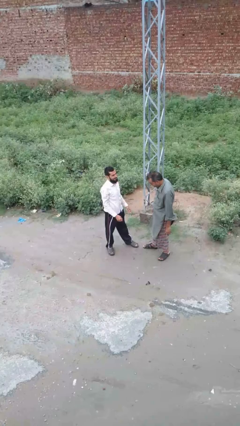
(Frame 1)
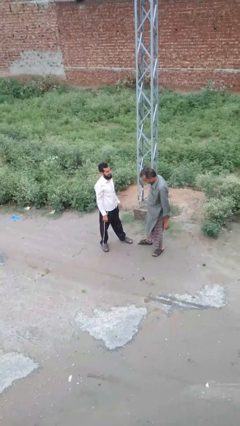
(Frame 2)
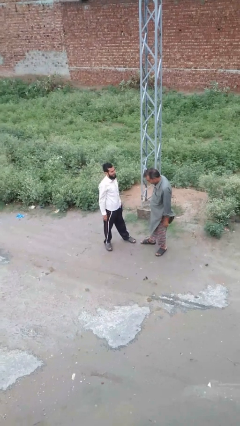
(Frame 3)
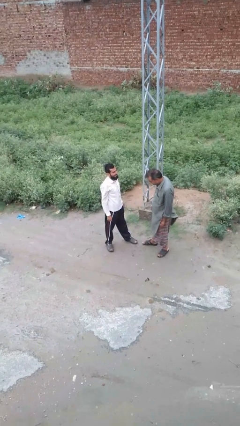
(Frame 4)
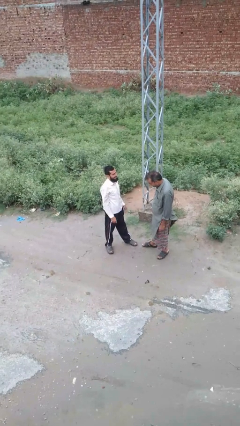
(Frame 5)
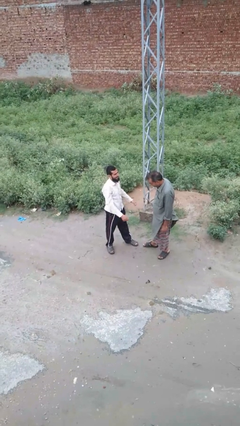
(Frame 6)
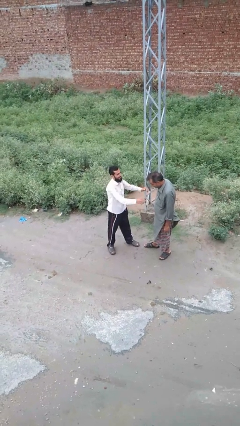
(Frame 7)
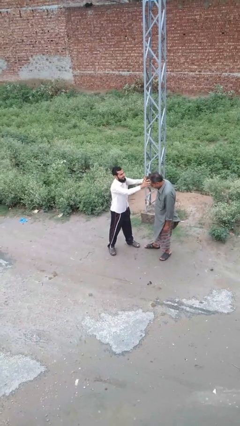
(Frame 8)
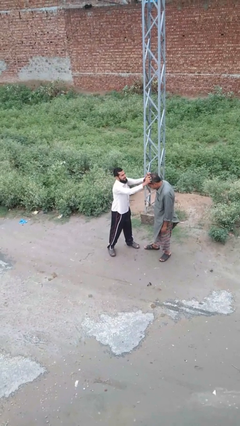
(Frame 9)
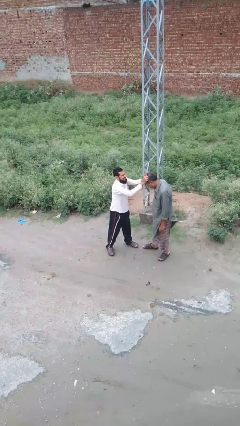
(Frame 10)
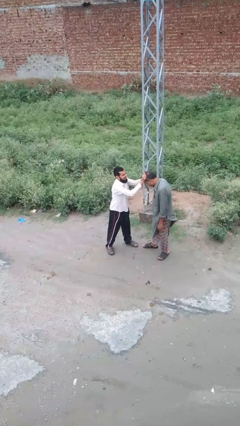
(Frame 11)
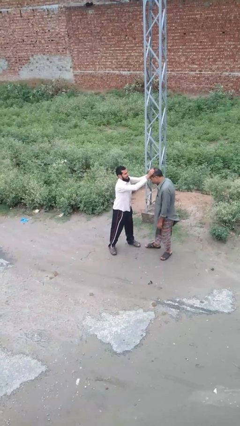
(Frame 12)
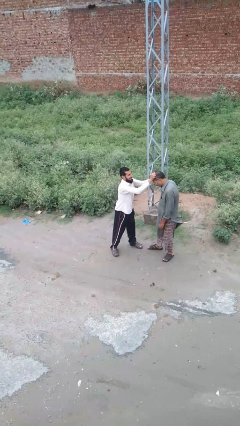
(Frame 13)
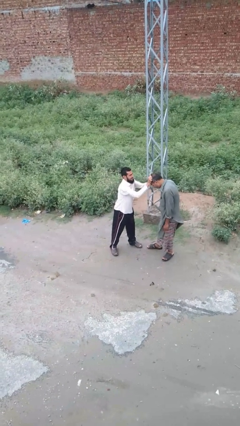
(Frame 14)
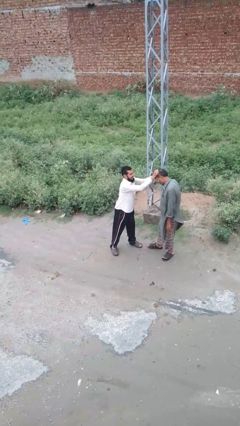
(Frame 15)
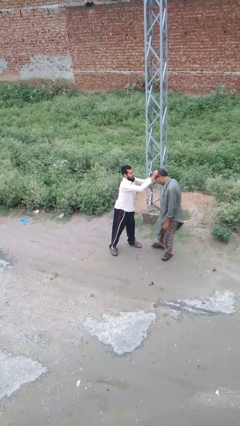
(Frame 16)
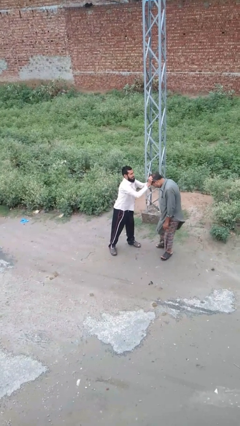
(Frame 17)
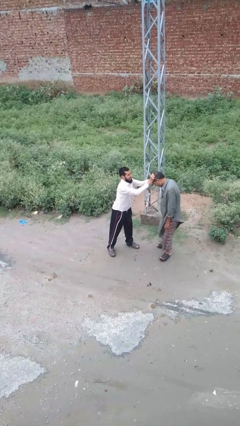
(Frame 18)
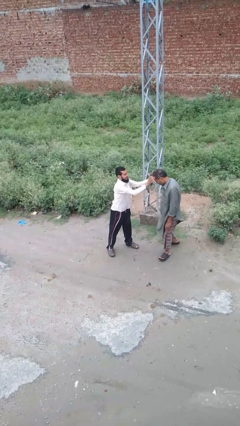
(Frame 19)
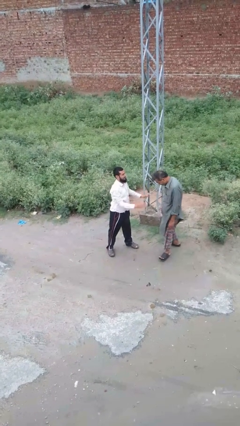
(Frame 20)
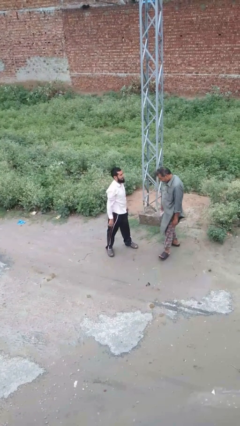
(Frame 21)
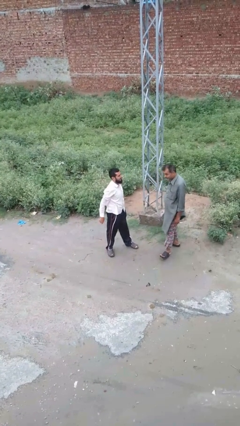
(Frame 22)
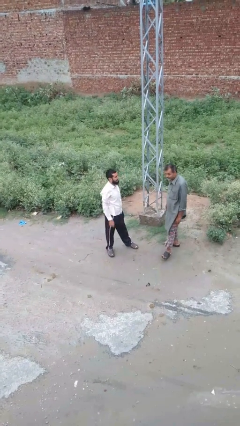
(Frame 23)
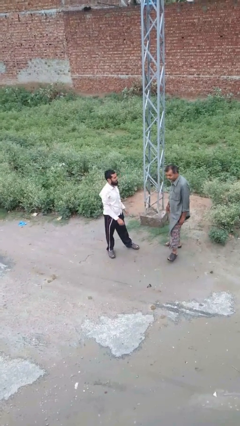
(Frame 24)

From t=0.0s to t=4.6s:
person grabs person by hair

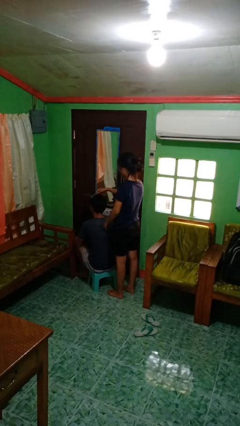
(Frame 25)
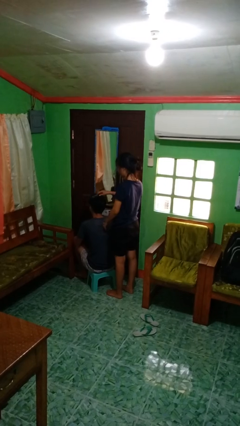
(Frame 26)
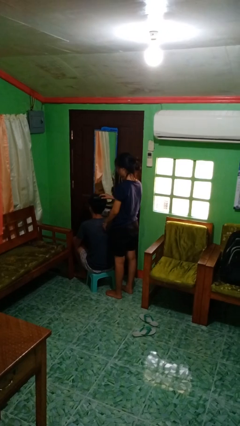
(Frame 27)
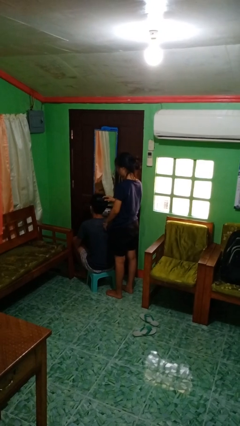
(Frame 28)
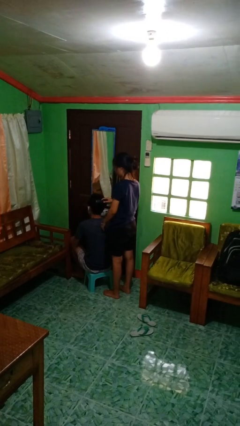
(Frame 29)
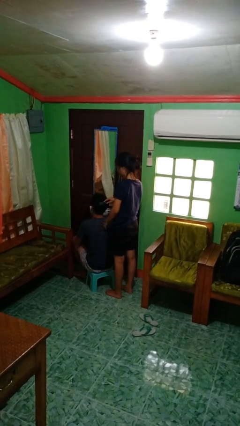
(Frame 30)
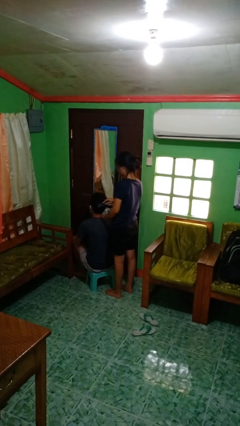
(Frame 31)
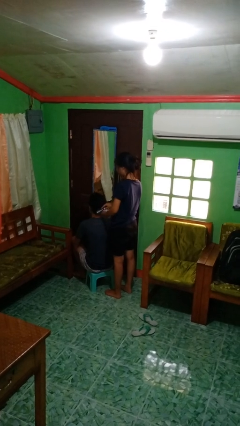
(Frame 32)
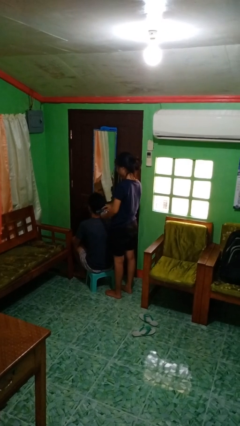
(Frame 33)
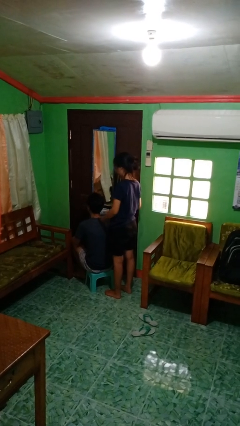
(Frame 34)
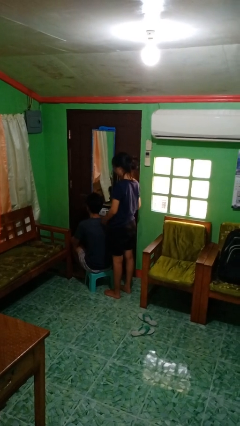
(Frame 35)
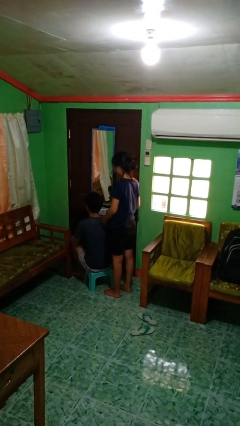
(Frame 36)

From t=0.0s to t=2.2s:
person brushes hair of person

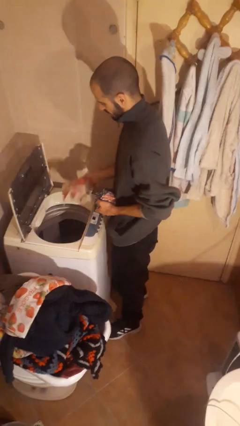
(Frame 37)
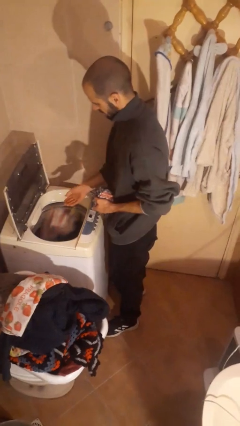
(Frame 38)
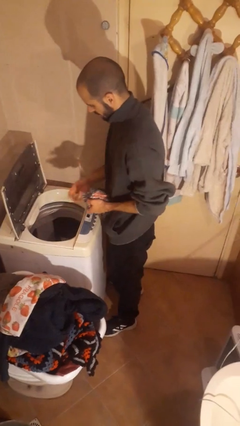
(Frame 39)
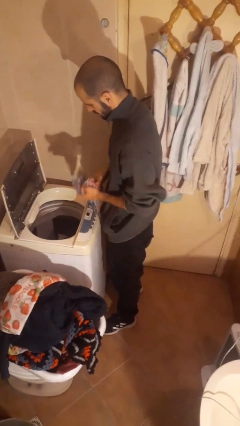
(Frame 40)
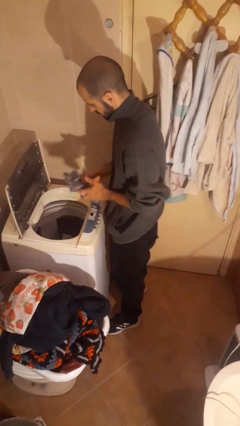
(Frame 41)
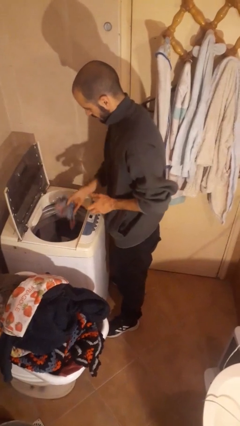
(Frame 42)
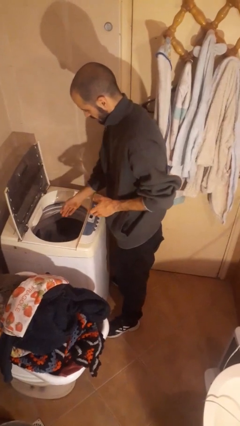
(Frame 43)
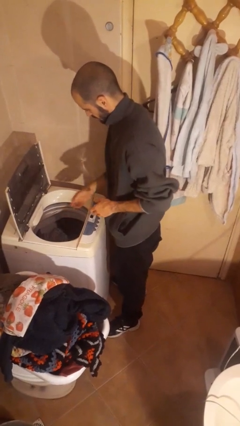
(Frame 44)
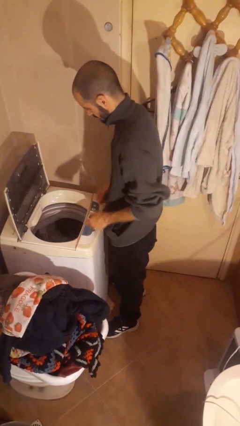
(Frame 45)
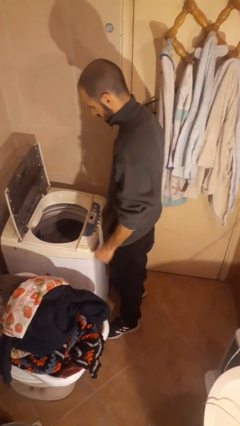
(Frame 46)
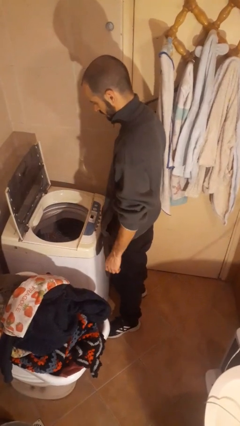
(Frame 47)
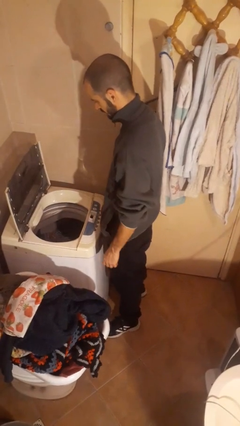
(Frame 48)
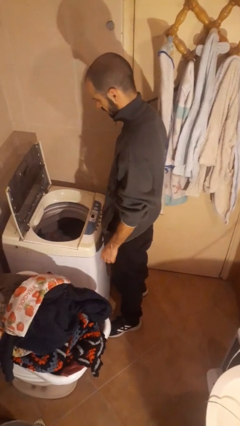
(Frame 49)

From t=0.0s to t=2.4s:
person unloads clotheswasher

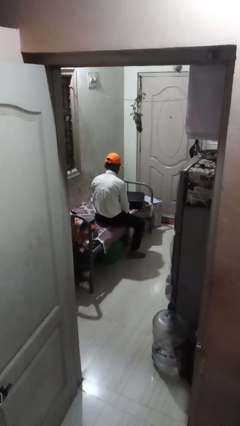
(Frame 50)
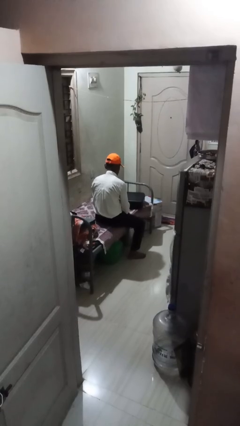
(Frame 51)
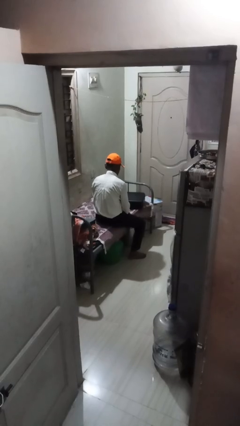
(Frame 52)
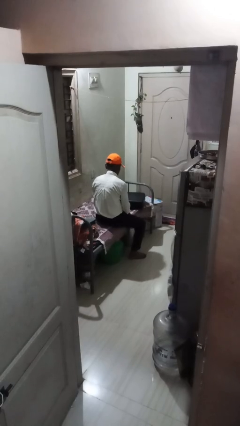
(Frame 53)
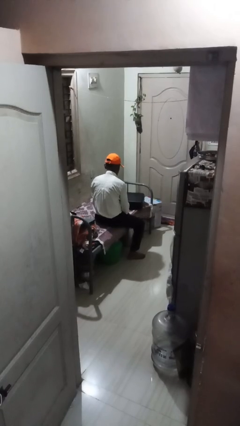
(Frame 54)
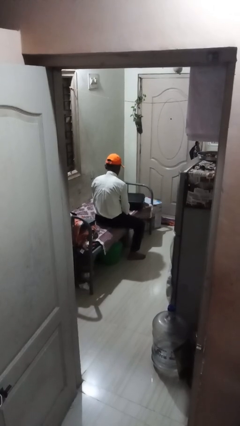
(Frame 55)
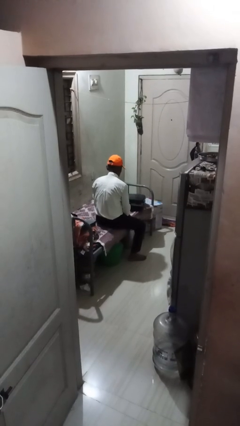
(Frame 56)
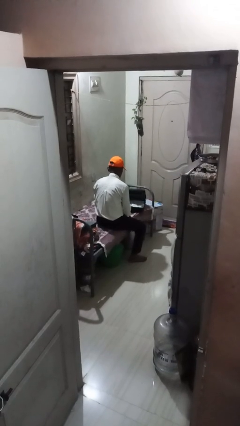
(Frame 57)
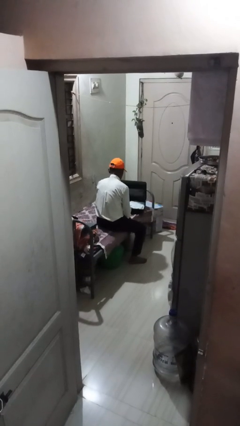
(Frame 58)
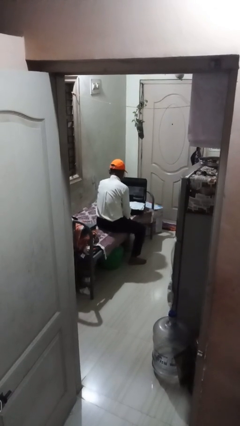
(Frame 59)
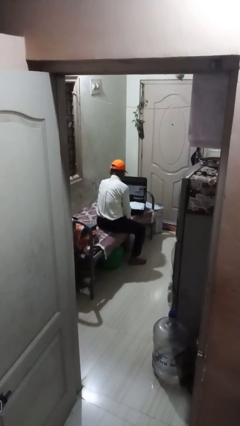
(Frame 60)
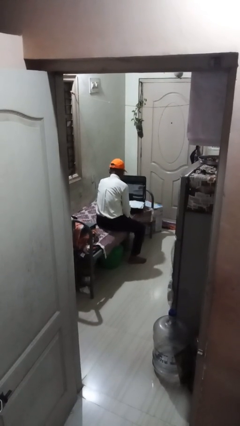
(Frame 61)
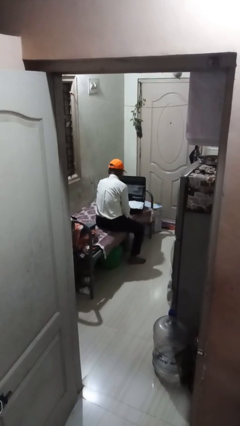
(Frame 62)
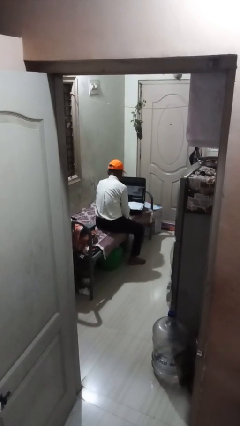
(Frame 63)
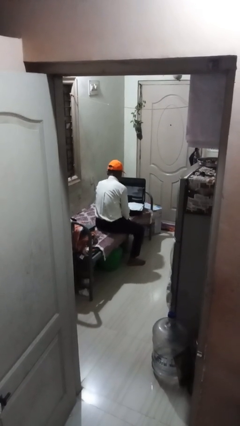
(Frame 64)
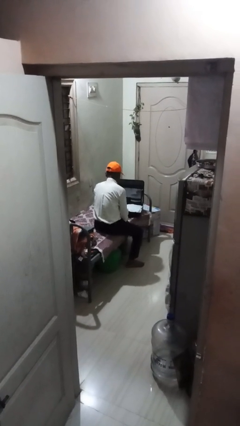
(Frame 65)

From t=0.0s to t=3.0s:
person opens suitcase

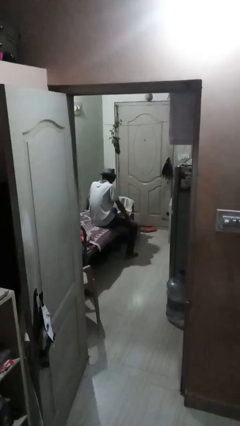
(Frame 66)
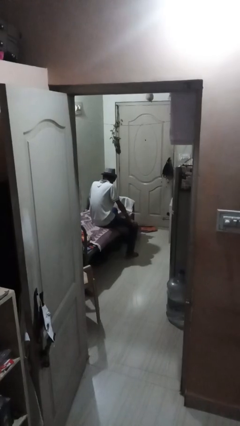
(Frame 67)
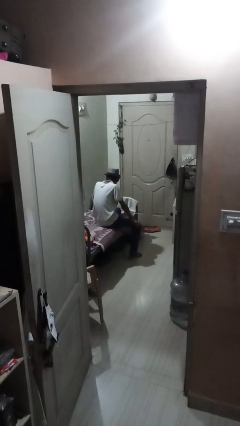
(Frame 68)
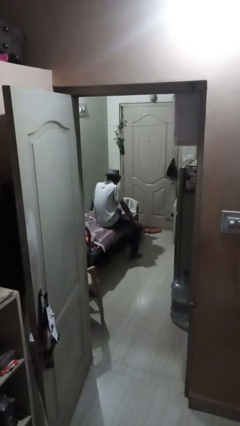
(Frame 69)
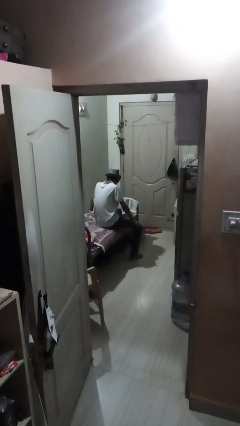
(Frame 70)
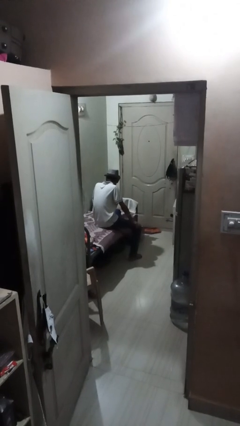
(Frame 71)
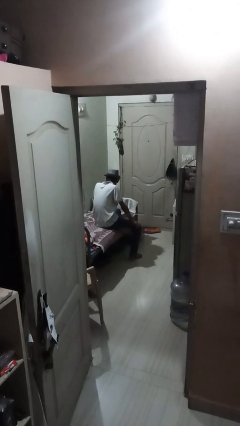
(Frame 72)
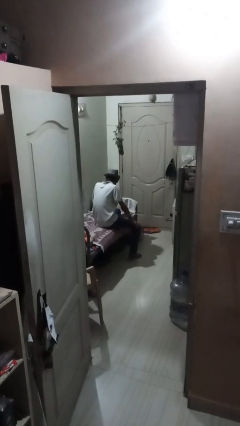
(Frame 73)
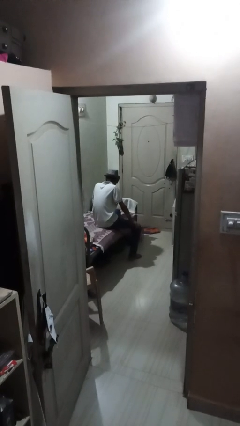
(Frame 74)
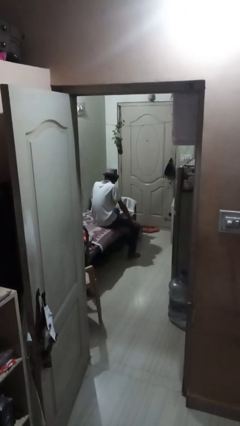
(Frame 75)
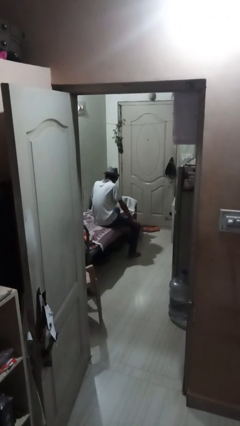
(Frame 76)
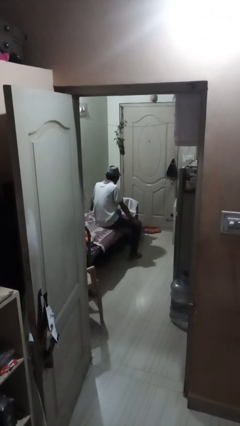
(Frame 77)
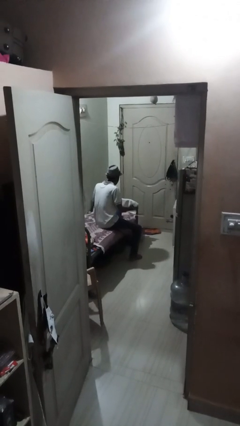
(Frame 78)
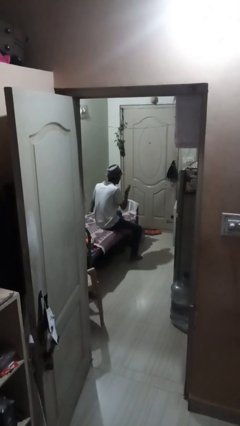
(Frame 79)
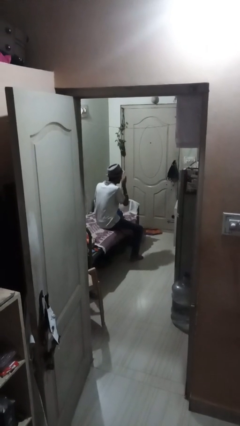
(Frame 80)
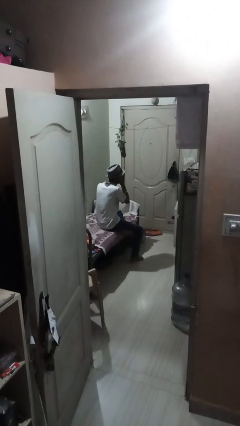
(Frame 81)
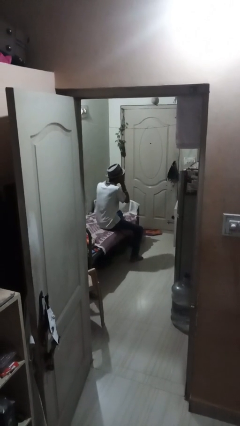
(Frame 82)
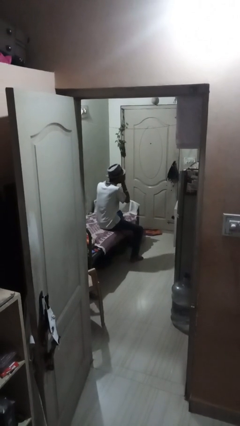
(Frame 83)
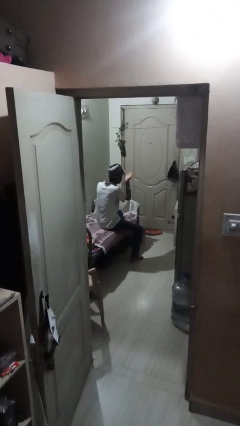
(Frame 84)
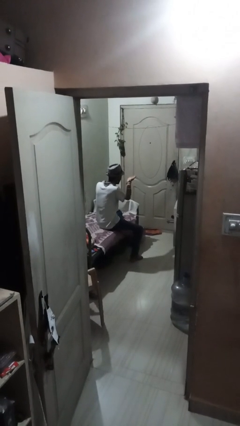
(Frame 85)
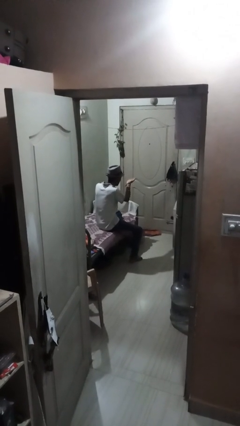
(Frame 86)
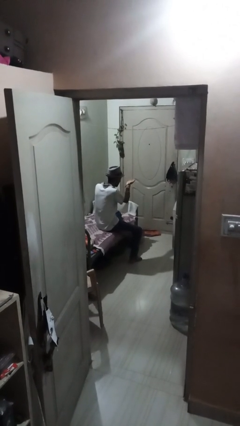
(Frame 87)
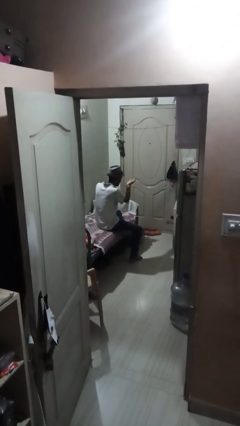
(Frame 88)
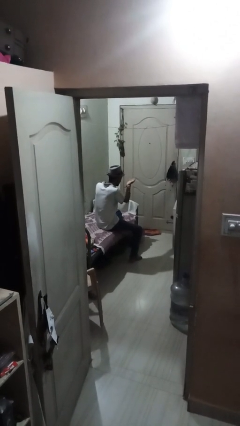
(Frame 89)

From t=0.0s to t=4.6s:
person gestures blow kiss

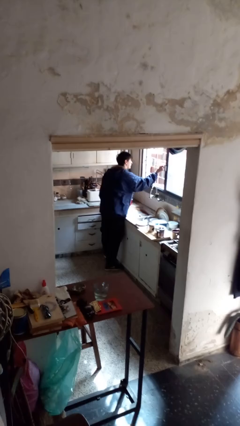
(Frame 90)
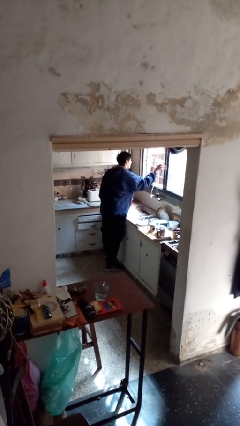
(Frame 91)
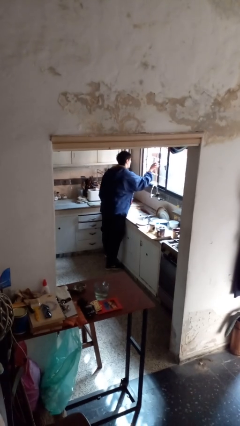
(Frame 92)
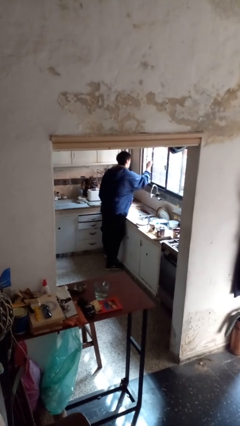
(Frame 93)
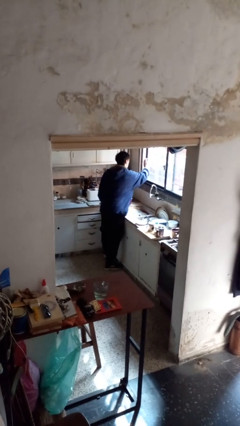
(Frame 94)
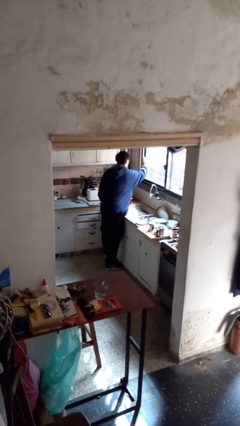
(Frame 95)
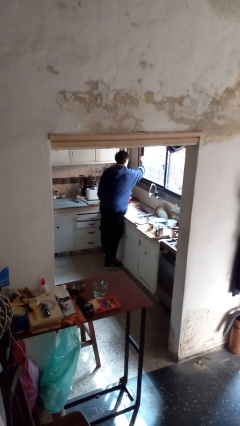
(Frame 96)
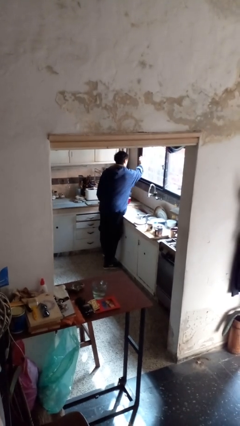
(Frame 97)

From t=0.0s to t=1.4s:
person closes home window
